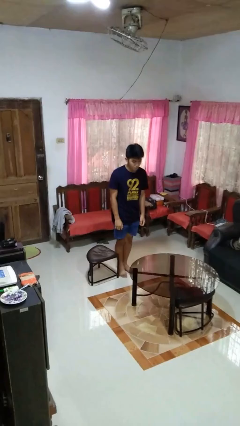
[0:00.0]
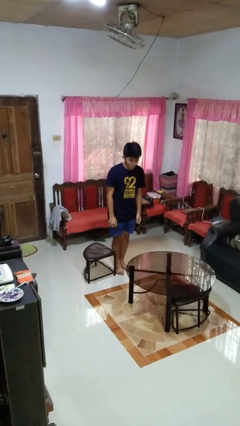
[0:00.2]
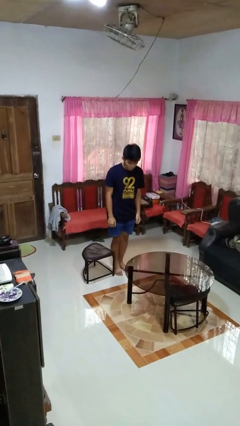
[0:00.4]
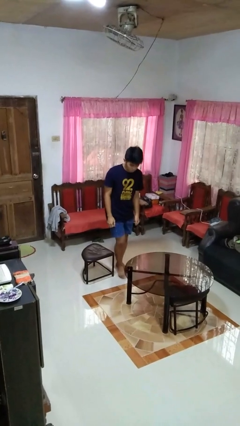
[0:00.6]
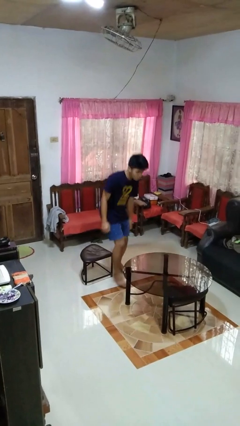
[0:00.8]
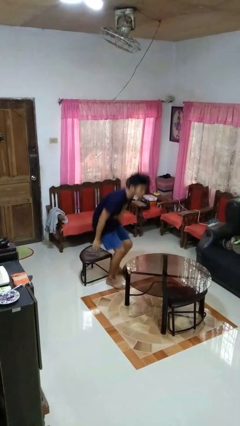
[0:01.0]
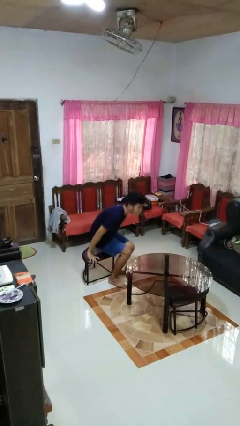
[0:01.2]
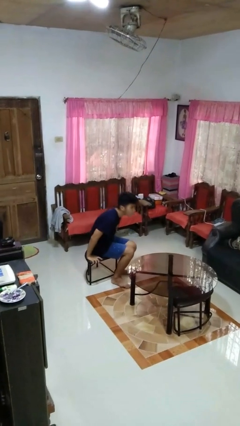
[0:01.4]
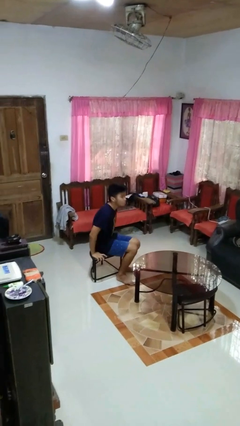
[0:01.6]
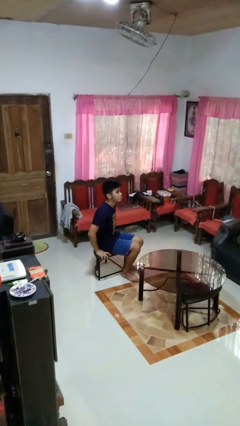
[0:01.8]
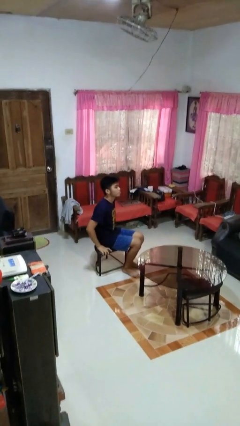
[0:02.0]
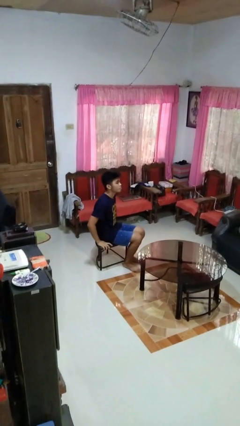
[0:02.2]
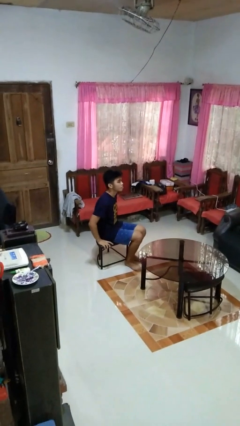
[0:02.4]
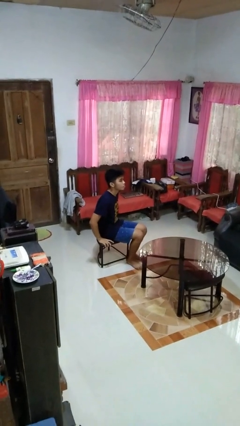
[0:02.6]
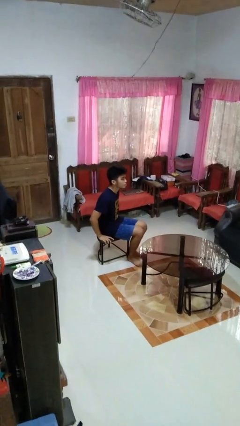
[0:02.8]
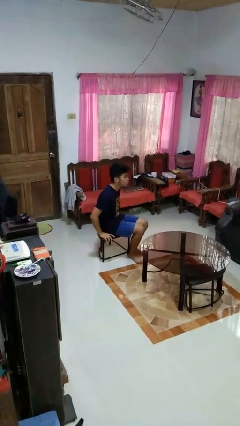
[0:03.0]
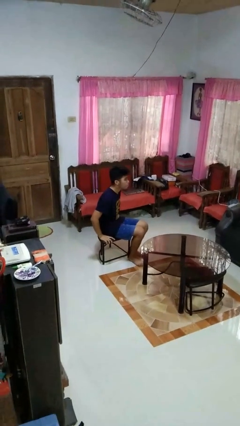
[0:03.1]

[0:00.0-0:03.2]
person sits down

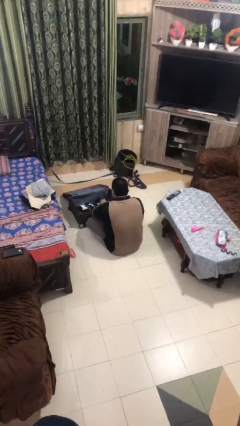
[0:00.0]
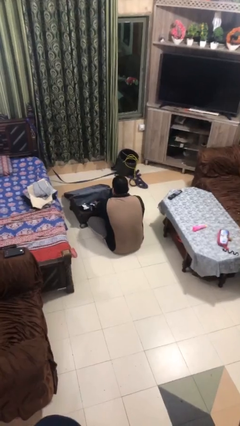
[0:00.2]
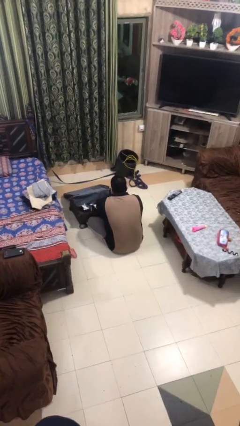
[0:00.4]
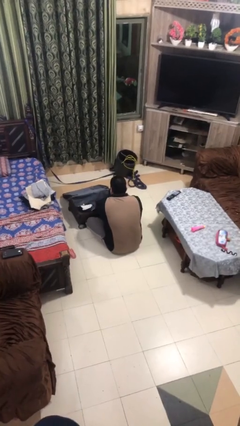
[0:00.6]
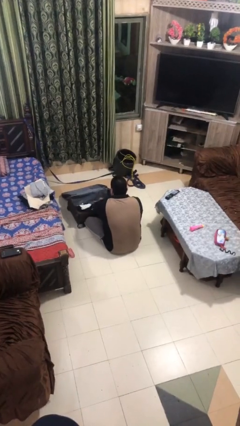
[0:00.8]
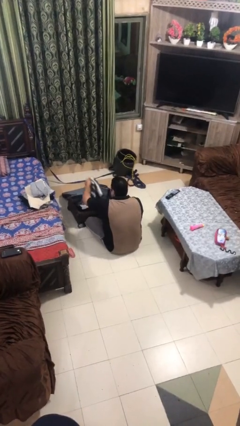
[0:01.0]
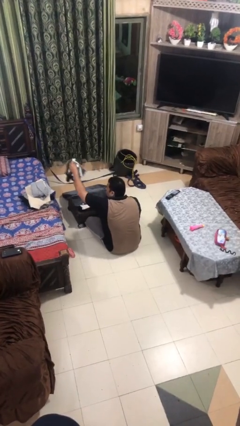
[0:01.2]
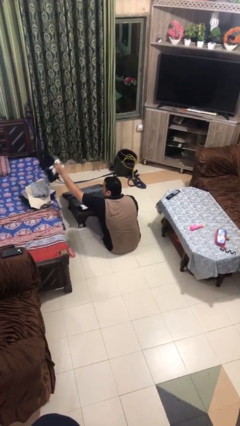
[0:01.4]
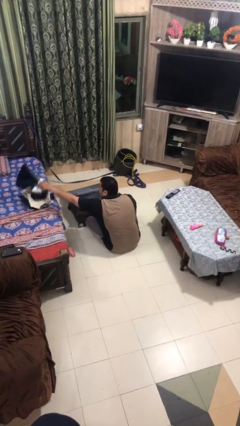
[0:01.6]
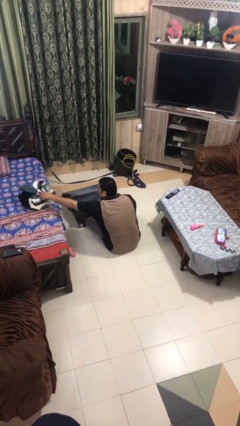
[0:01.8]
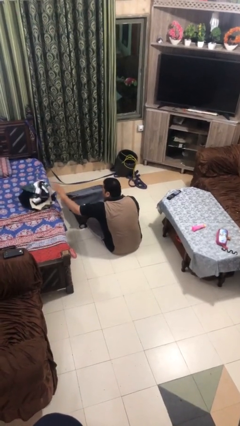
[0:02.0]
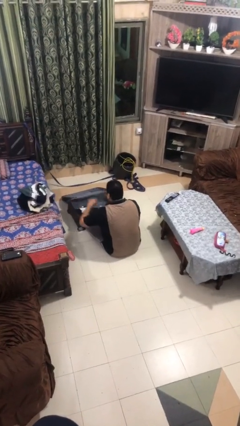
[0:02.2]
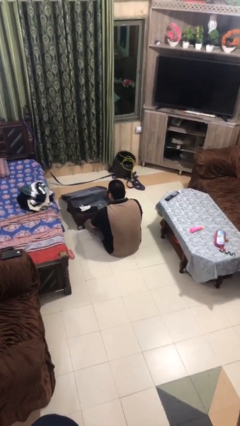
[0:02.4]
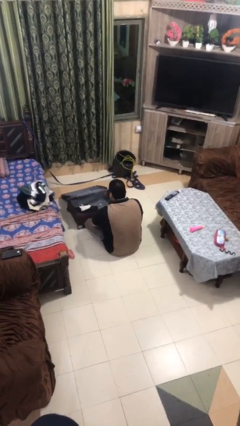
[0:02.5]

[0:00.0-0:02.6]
person unloads clothes from suitcase

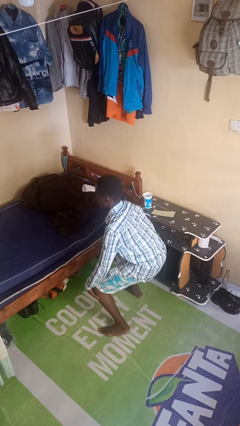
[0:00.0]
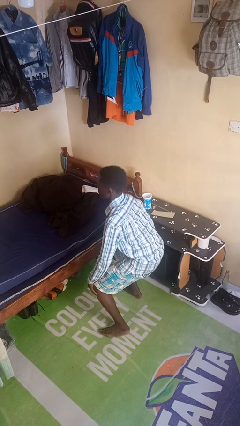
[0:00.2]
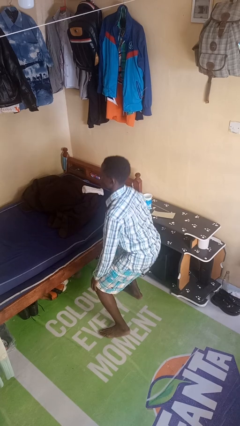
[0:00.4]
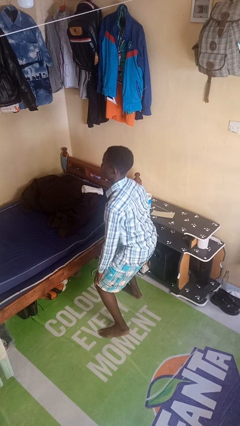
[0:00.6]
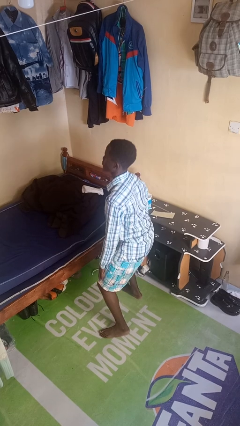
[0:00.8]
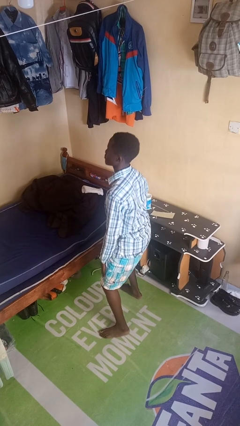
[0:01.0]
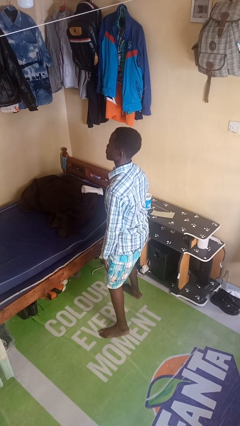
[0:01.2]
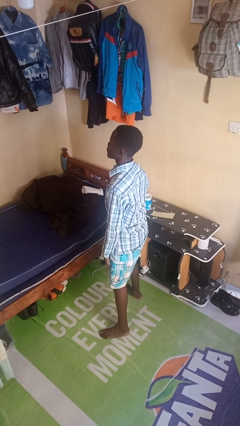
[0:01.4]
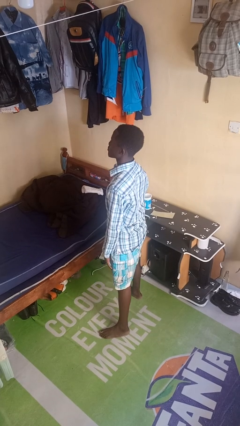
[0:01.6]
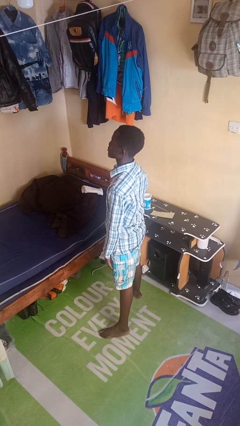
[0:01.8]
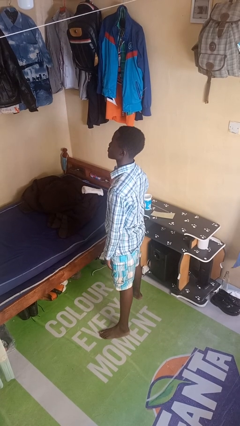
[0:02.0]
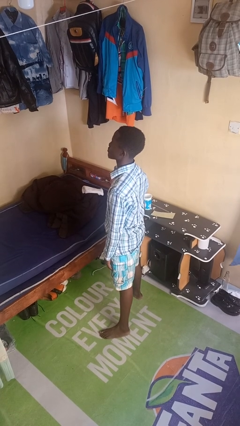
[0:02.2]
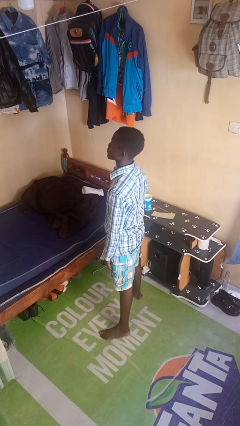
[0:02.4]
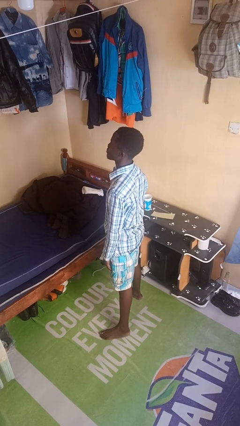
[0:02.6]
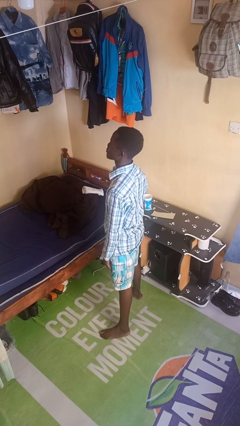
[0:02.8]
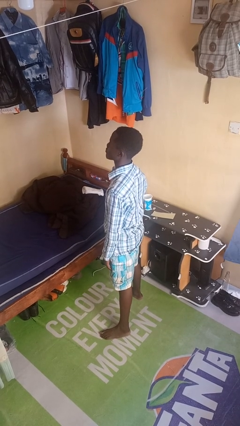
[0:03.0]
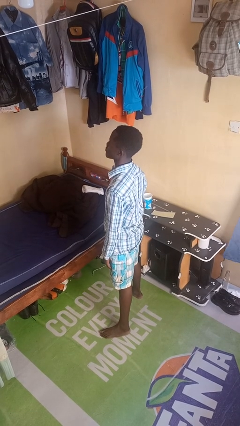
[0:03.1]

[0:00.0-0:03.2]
person stands up

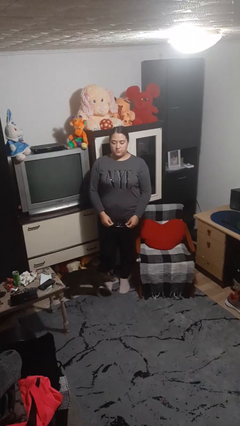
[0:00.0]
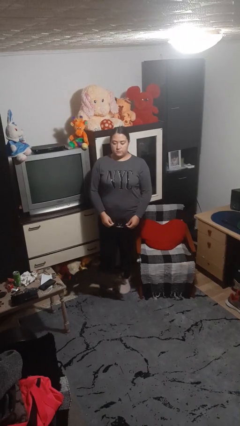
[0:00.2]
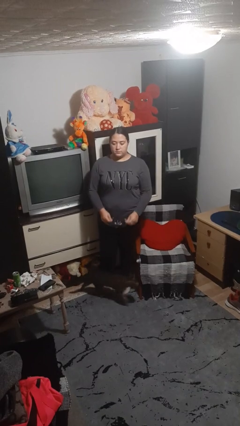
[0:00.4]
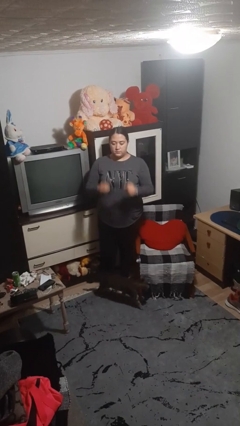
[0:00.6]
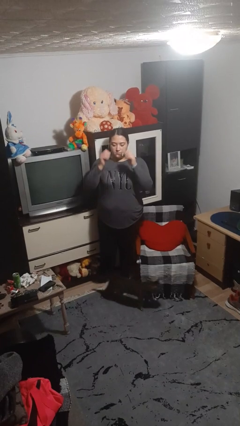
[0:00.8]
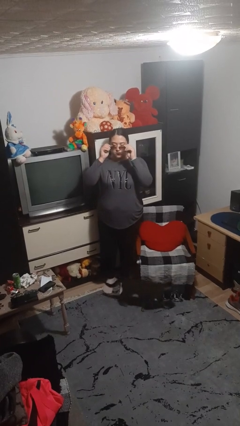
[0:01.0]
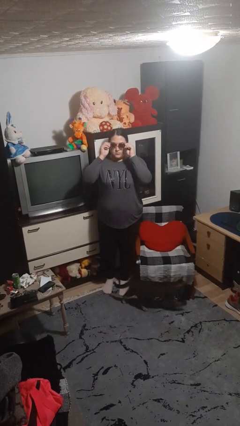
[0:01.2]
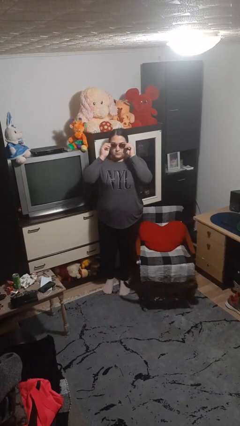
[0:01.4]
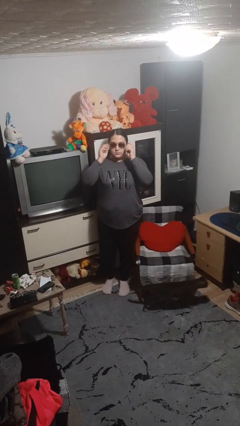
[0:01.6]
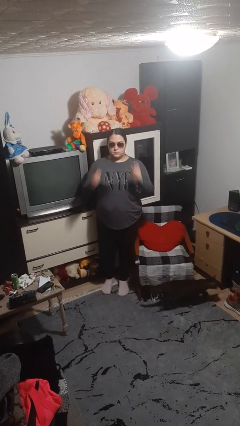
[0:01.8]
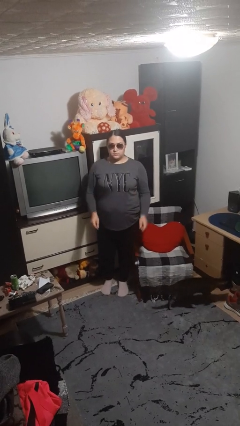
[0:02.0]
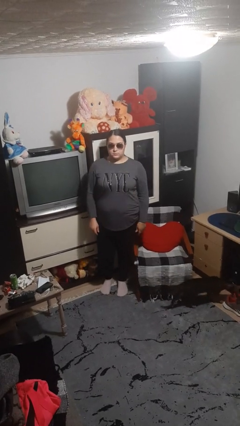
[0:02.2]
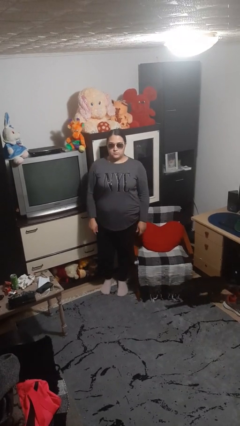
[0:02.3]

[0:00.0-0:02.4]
person puts on sunglasses

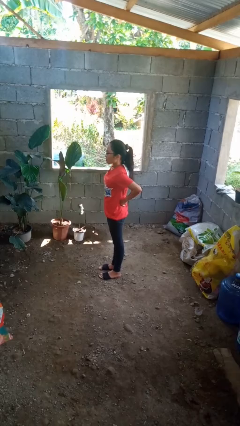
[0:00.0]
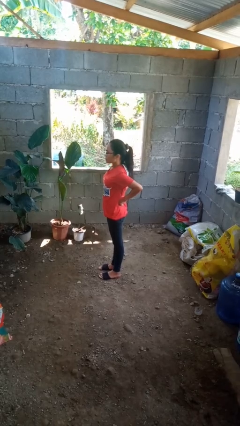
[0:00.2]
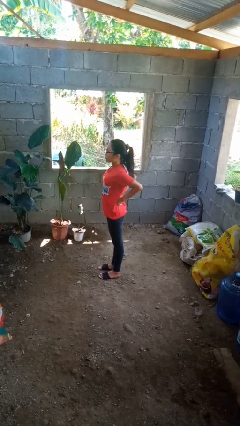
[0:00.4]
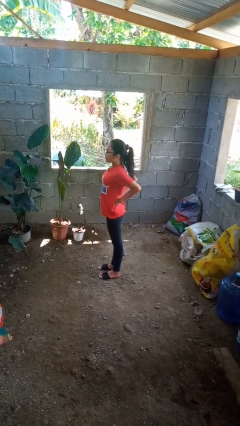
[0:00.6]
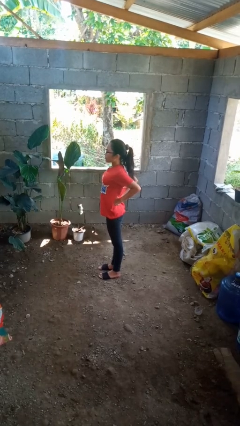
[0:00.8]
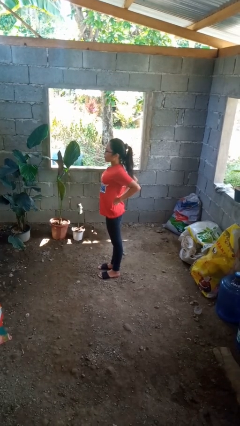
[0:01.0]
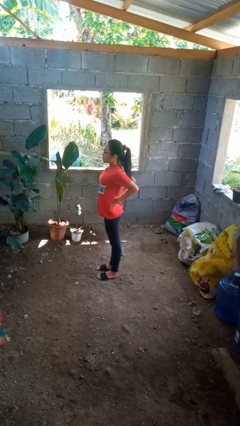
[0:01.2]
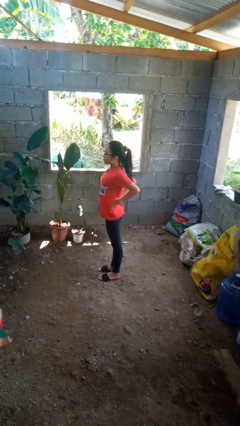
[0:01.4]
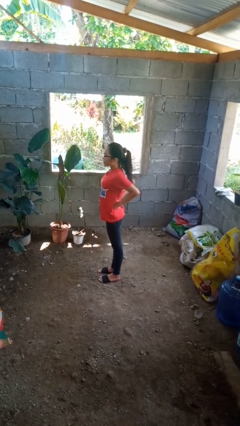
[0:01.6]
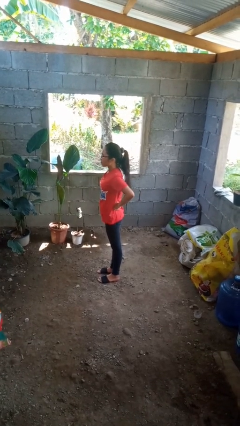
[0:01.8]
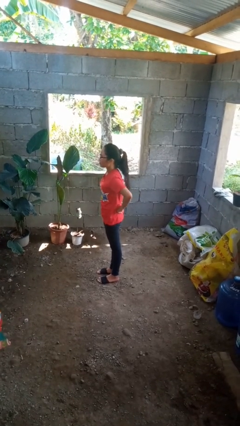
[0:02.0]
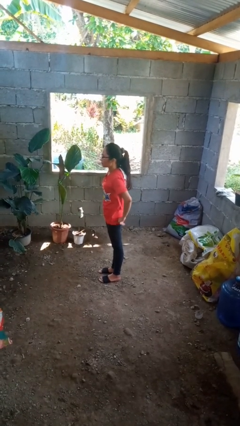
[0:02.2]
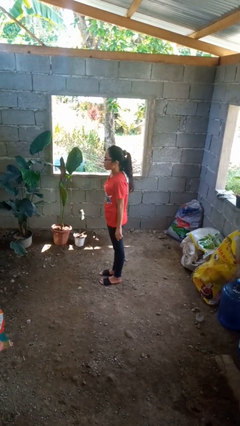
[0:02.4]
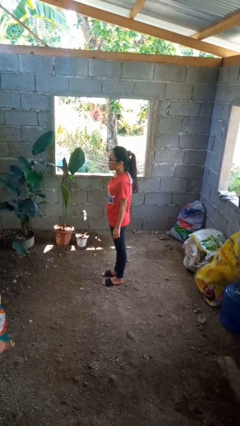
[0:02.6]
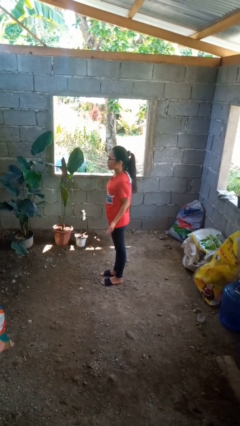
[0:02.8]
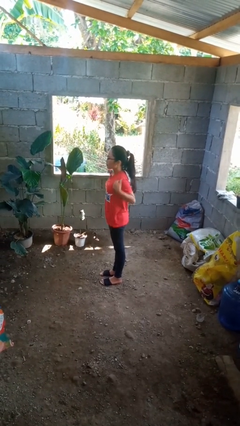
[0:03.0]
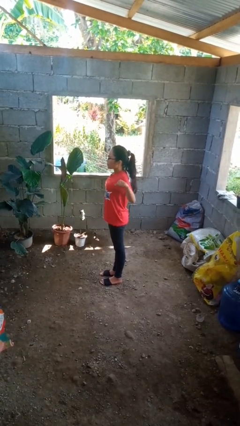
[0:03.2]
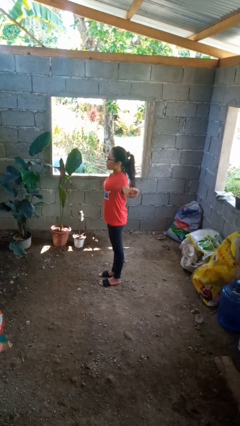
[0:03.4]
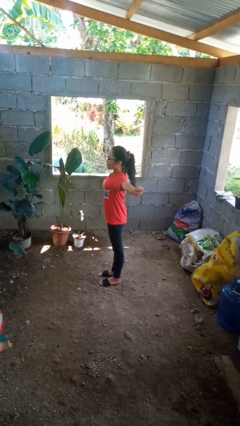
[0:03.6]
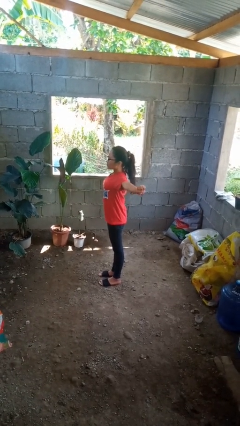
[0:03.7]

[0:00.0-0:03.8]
person stretches back

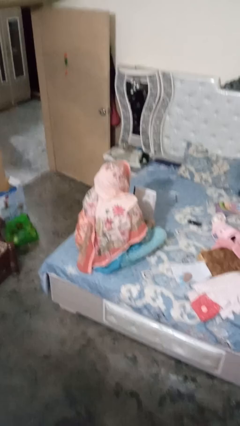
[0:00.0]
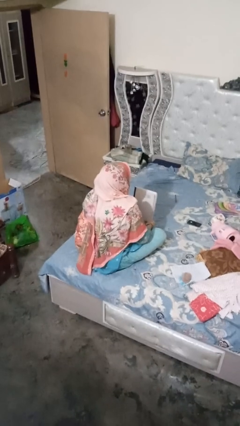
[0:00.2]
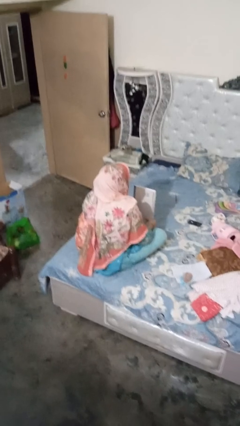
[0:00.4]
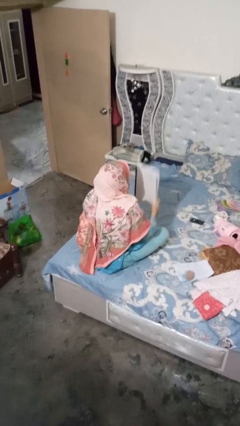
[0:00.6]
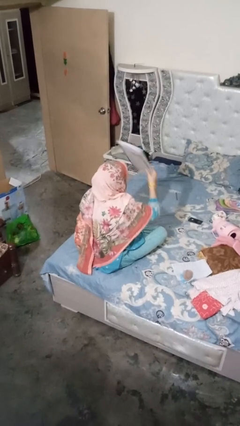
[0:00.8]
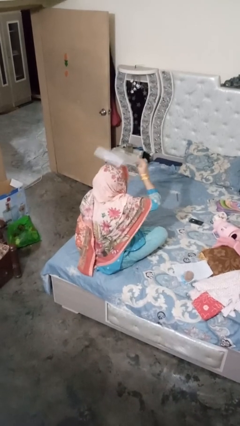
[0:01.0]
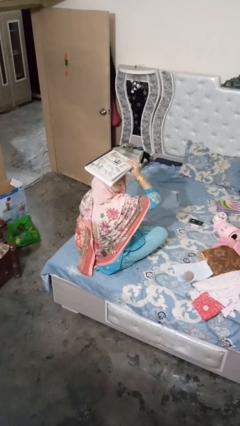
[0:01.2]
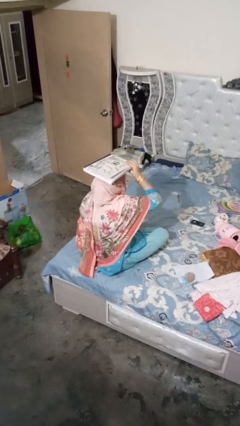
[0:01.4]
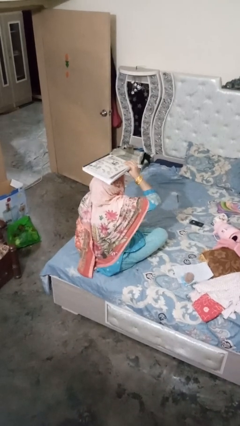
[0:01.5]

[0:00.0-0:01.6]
person holds object above head

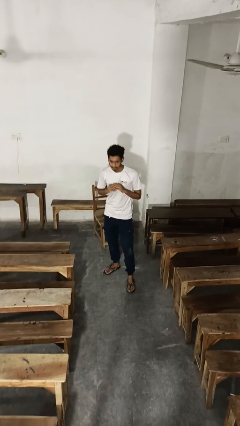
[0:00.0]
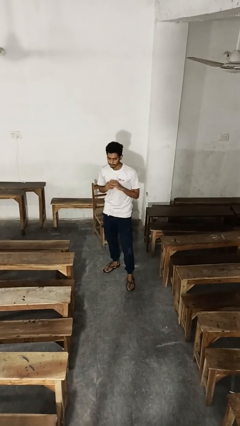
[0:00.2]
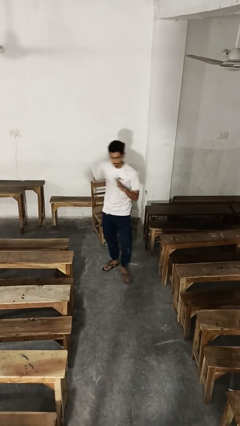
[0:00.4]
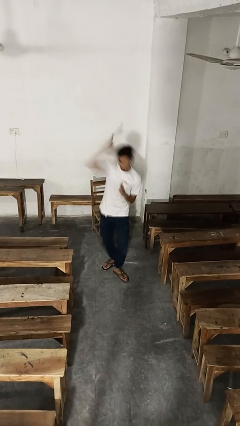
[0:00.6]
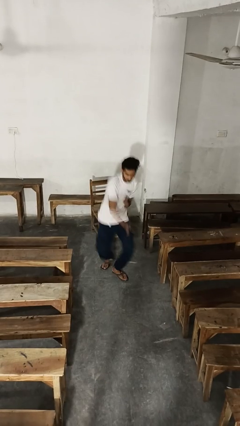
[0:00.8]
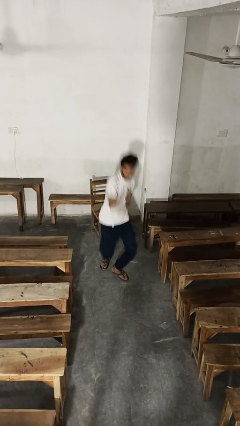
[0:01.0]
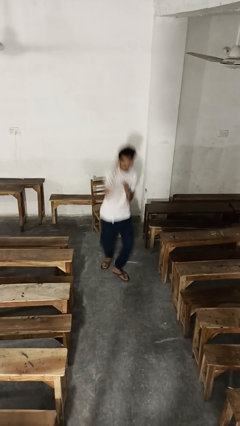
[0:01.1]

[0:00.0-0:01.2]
person karate chop
